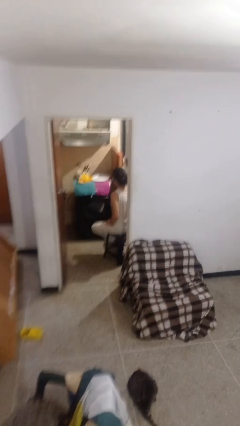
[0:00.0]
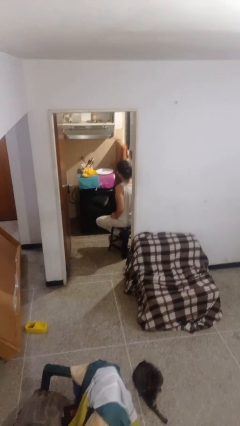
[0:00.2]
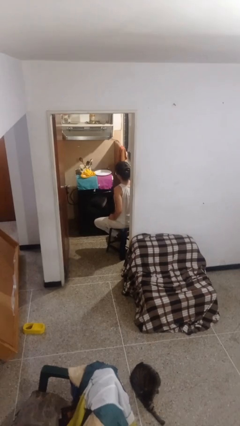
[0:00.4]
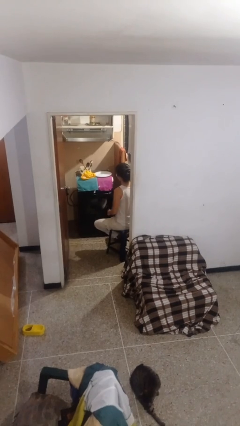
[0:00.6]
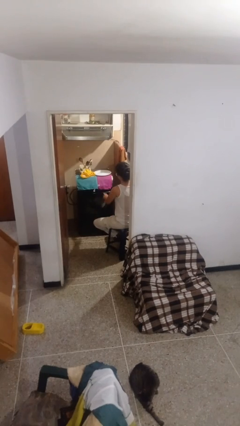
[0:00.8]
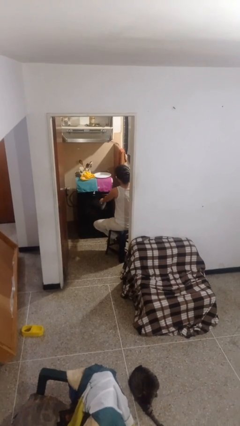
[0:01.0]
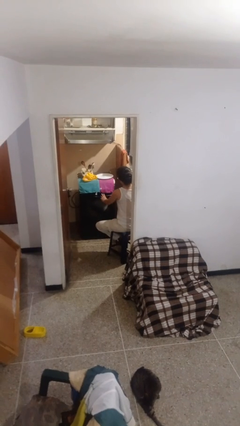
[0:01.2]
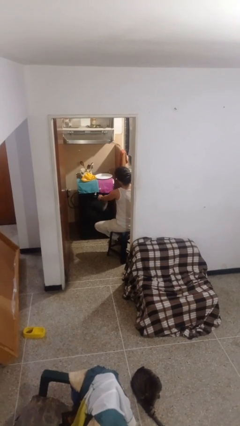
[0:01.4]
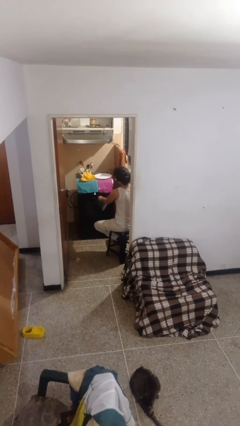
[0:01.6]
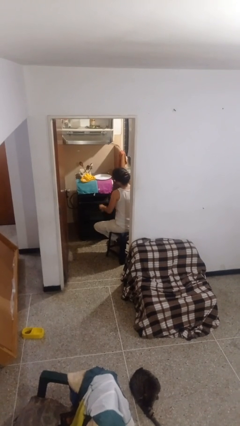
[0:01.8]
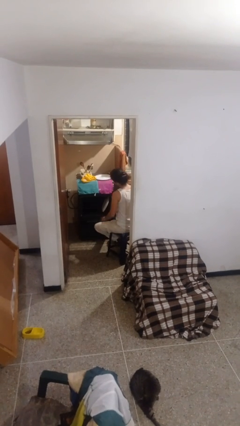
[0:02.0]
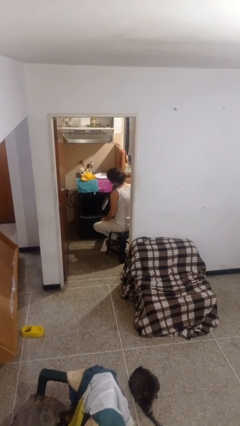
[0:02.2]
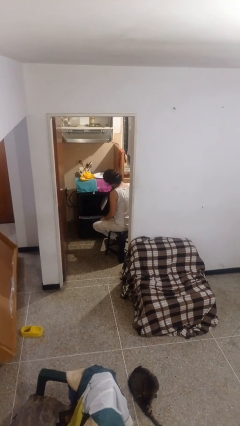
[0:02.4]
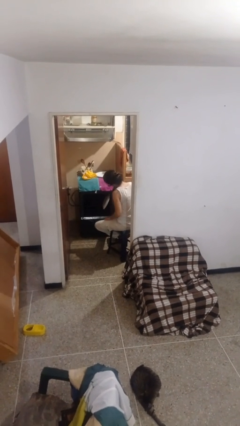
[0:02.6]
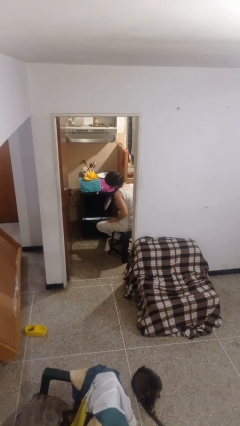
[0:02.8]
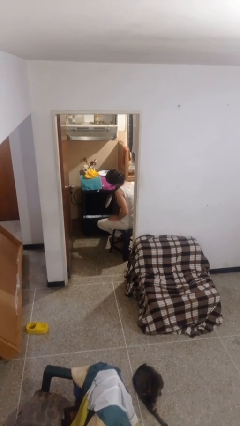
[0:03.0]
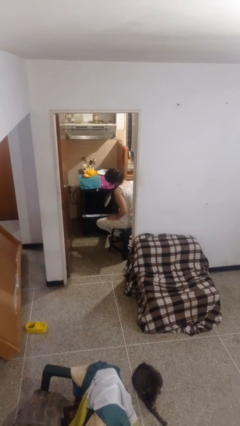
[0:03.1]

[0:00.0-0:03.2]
person opens dishwasher

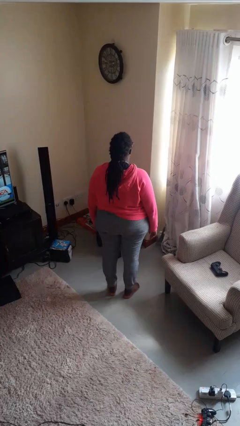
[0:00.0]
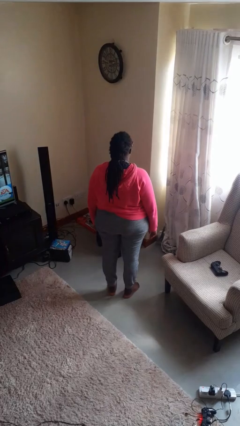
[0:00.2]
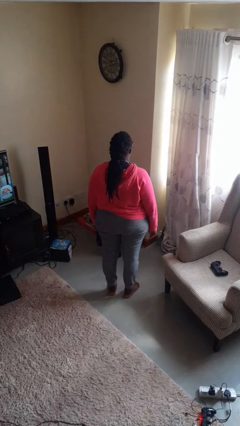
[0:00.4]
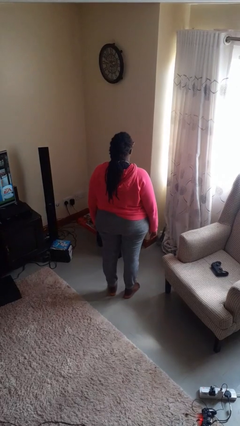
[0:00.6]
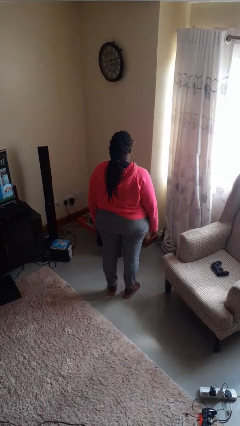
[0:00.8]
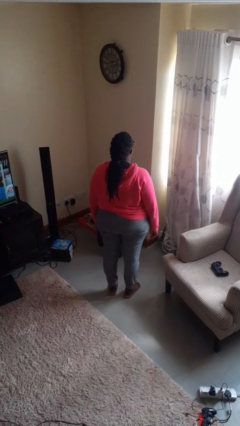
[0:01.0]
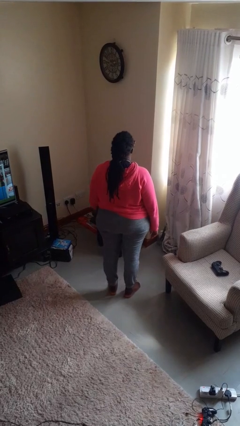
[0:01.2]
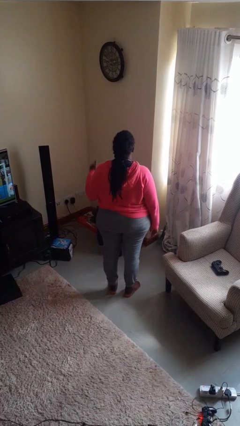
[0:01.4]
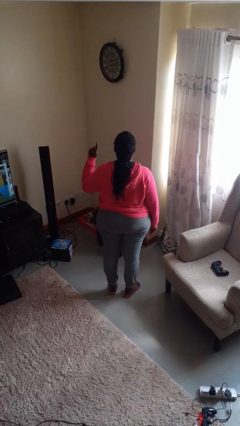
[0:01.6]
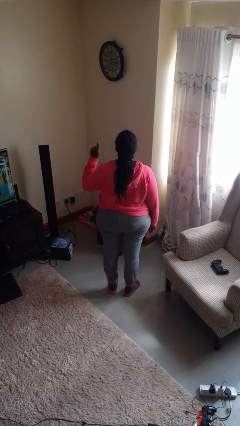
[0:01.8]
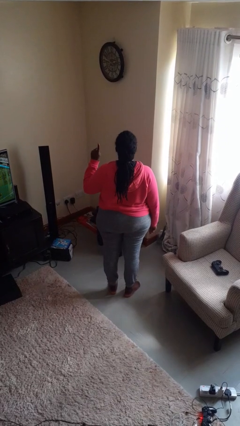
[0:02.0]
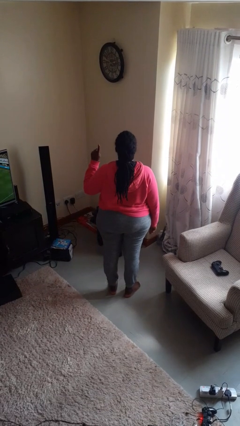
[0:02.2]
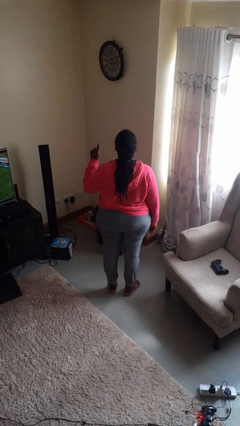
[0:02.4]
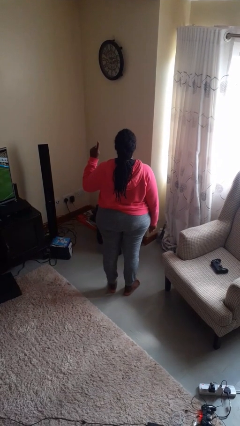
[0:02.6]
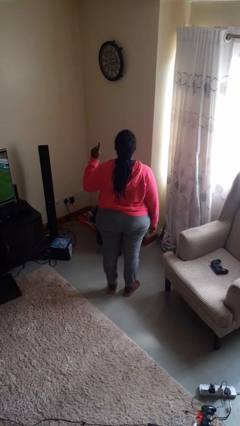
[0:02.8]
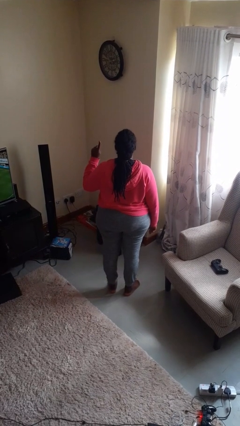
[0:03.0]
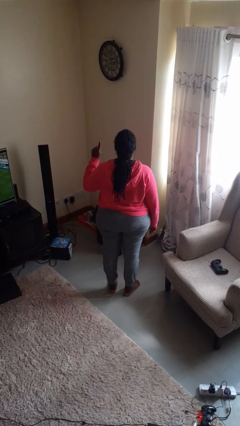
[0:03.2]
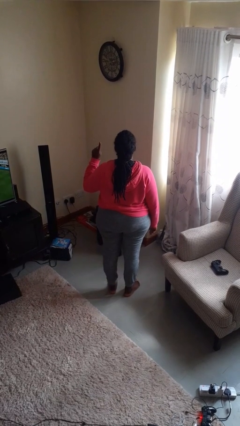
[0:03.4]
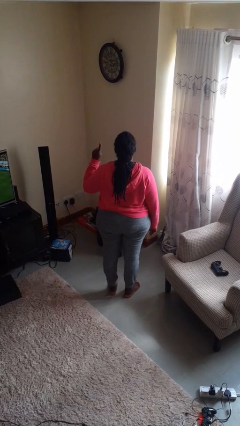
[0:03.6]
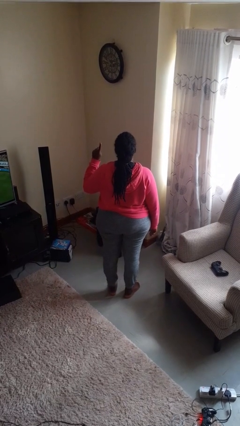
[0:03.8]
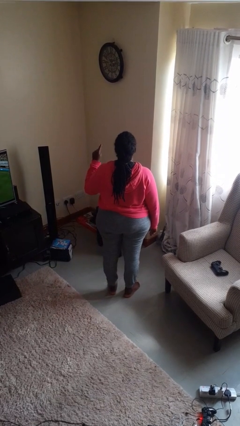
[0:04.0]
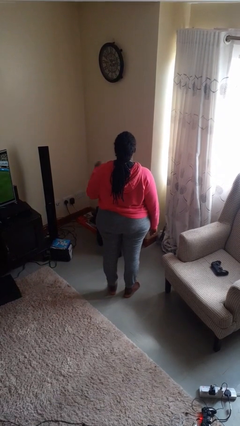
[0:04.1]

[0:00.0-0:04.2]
person gestures number one

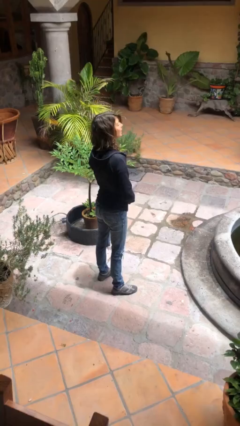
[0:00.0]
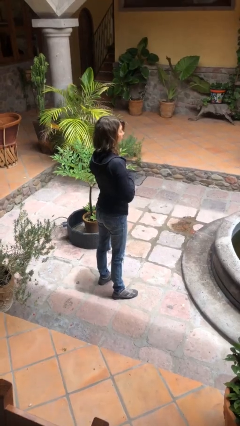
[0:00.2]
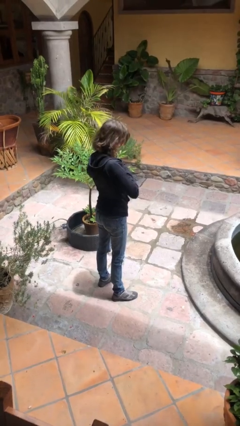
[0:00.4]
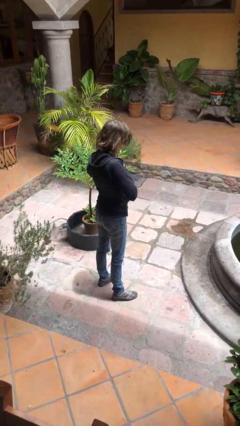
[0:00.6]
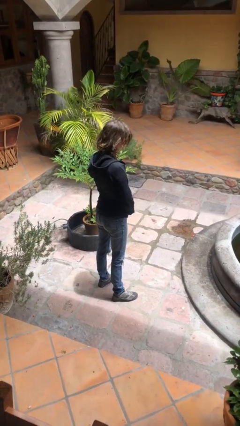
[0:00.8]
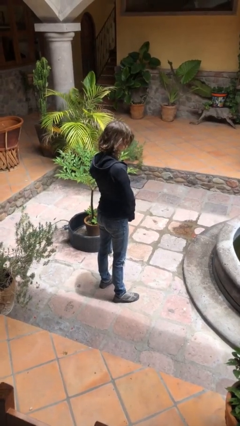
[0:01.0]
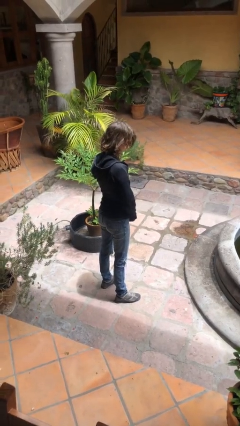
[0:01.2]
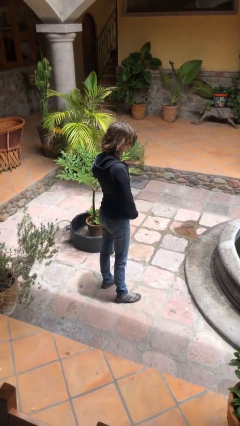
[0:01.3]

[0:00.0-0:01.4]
person unzips jacket

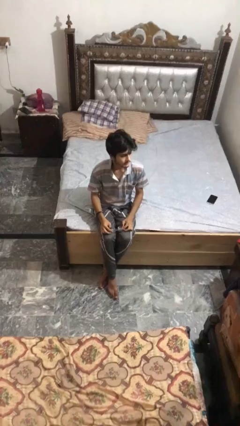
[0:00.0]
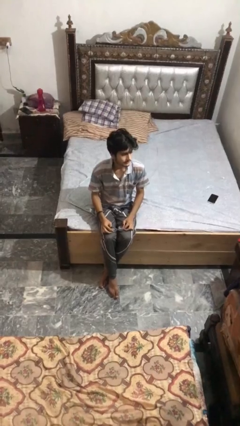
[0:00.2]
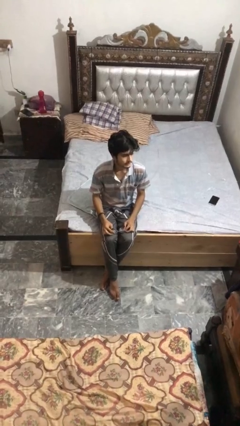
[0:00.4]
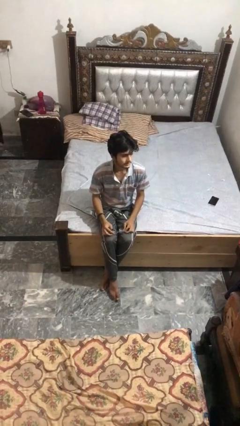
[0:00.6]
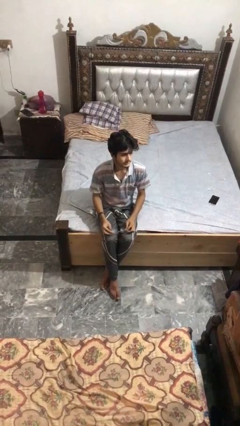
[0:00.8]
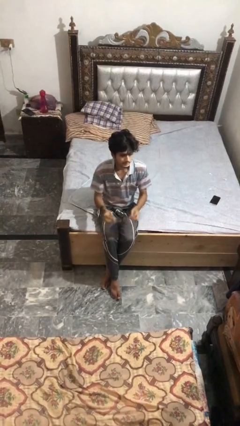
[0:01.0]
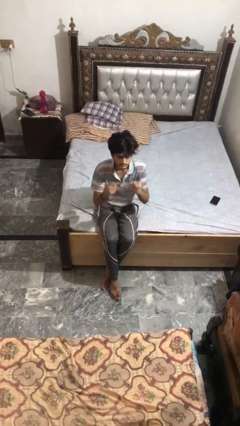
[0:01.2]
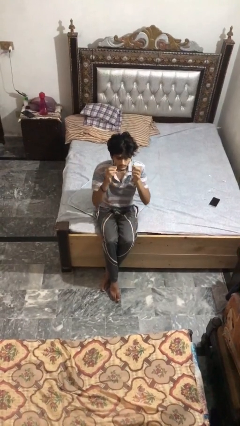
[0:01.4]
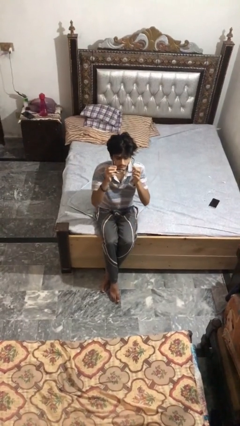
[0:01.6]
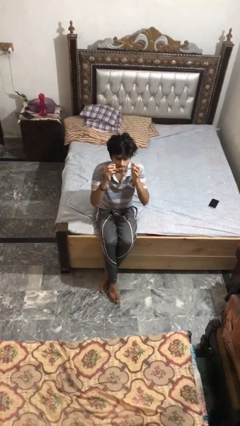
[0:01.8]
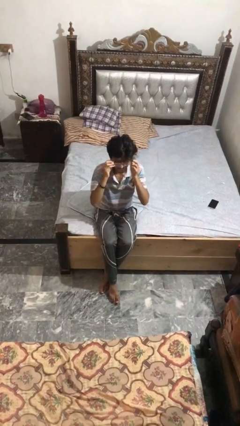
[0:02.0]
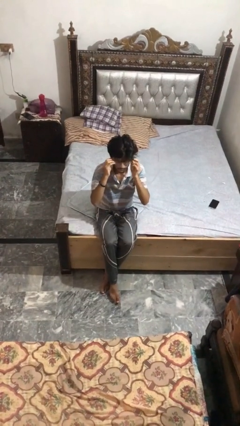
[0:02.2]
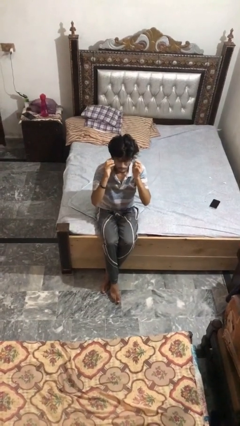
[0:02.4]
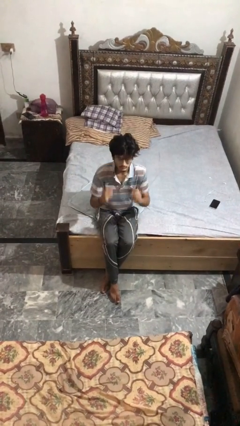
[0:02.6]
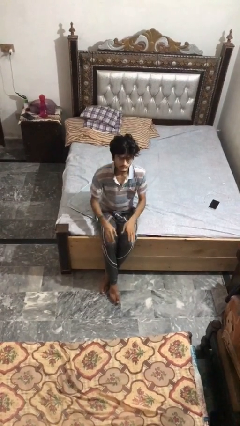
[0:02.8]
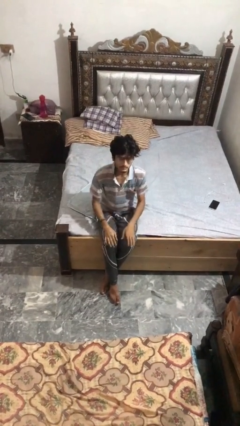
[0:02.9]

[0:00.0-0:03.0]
person puts on glasses

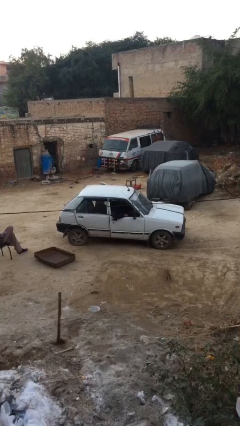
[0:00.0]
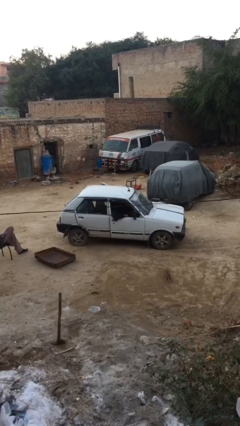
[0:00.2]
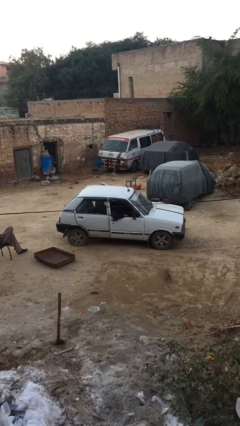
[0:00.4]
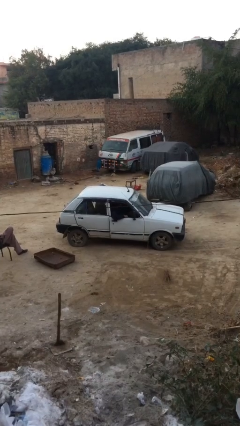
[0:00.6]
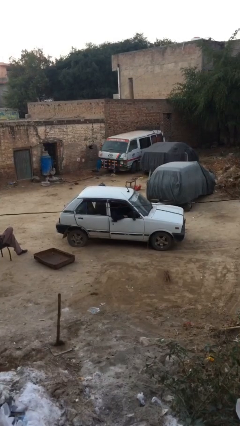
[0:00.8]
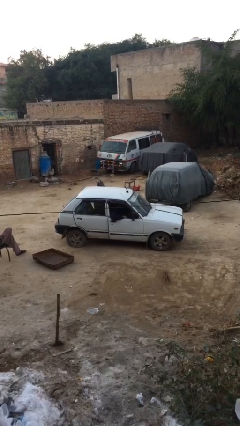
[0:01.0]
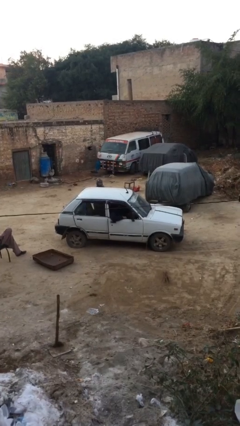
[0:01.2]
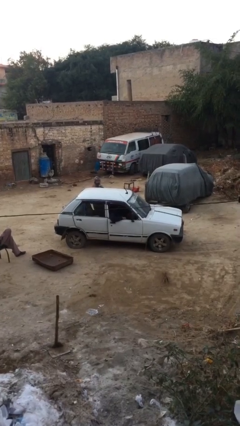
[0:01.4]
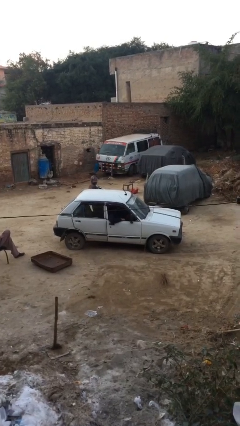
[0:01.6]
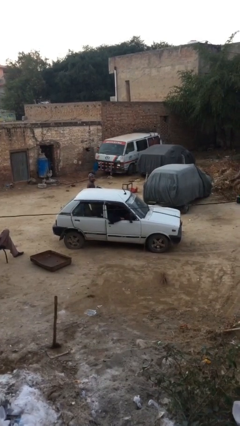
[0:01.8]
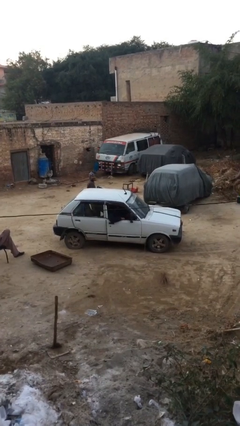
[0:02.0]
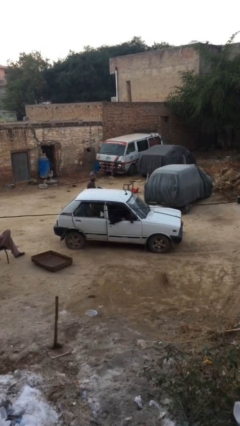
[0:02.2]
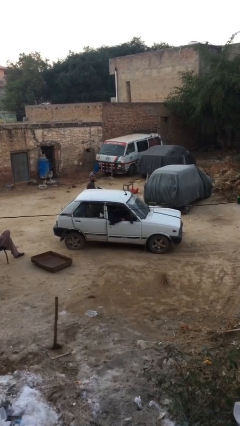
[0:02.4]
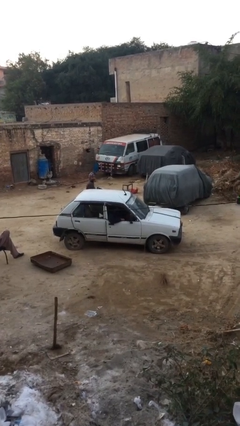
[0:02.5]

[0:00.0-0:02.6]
car drops off person

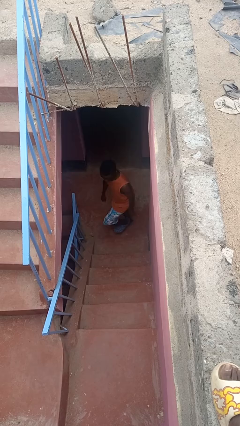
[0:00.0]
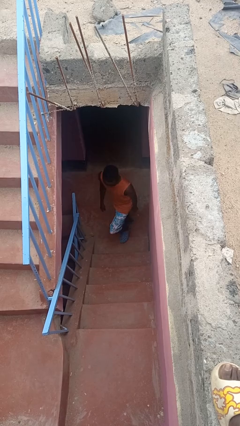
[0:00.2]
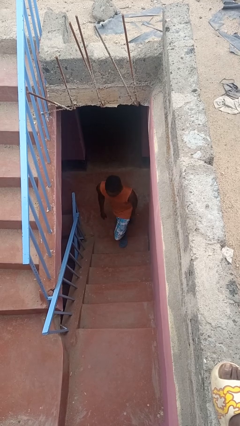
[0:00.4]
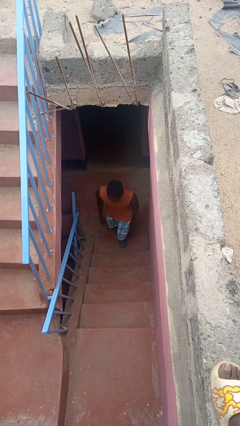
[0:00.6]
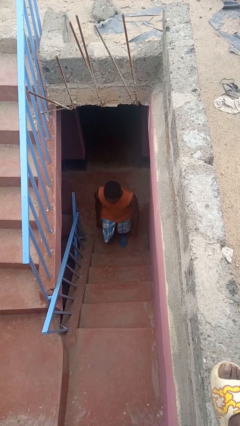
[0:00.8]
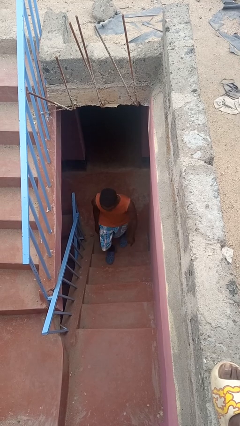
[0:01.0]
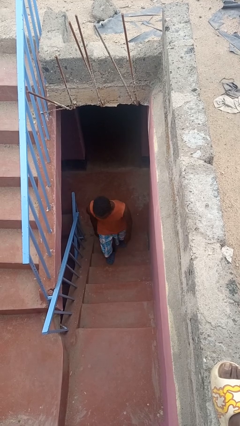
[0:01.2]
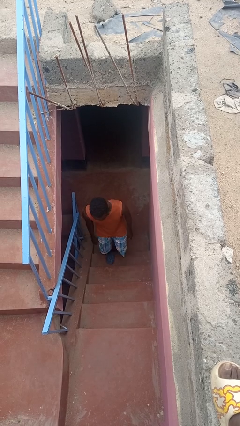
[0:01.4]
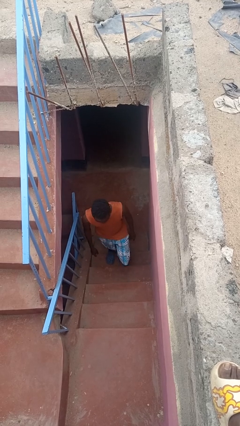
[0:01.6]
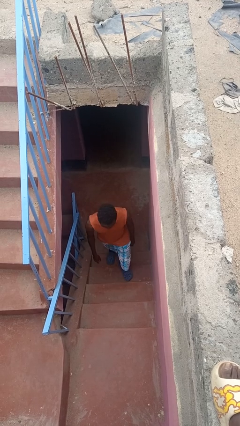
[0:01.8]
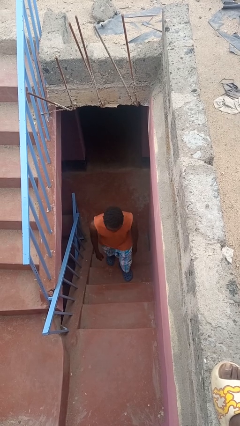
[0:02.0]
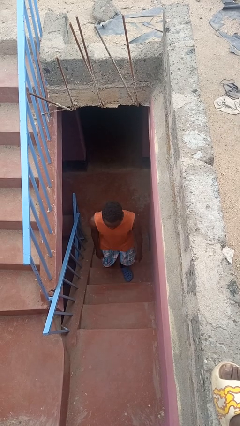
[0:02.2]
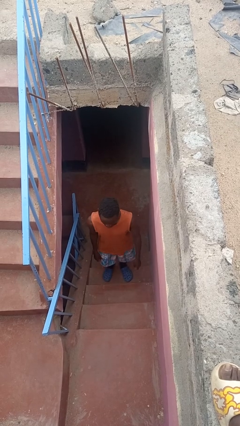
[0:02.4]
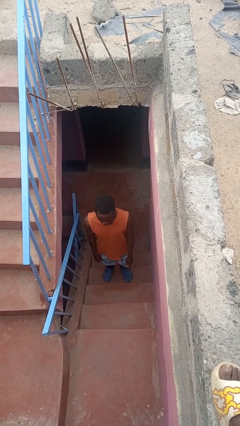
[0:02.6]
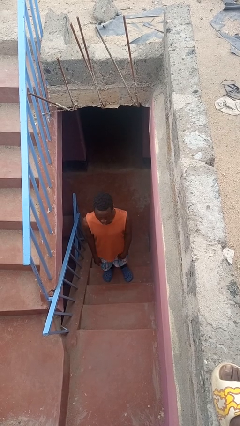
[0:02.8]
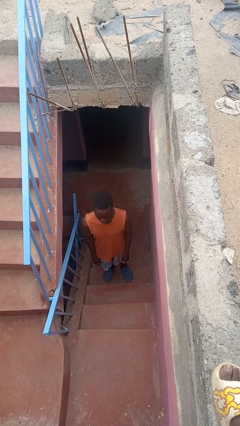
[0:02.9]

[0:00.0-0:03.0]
person climbs up stairs
